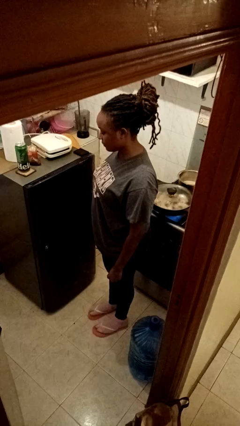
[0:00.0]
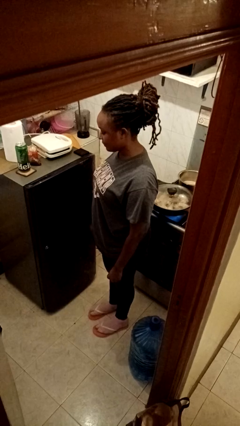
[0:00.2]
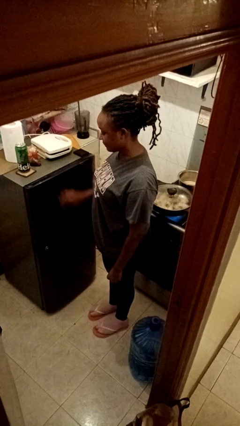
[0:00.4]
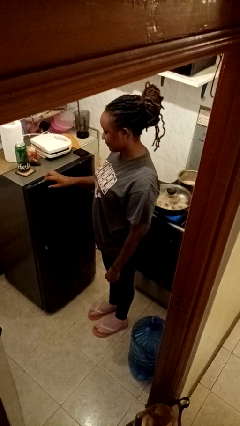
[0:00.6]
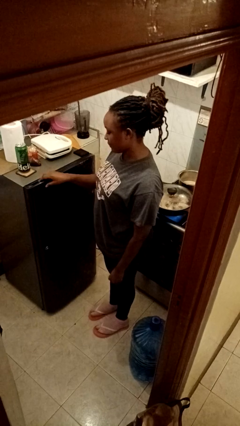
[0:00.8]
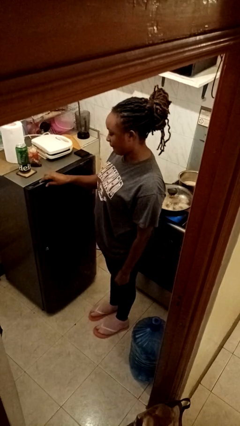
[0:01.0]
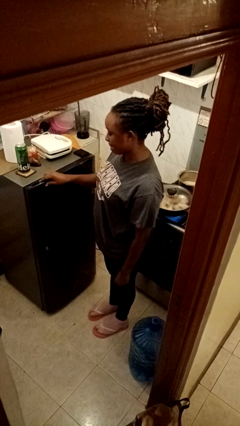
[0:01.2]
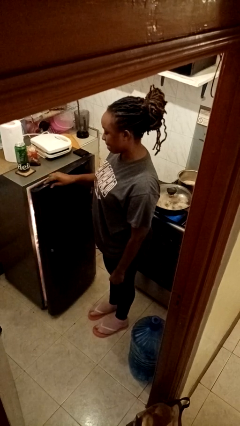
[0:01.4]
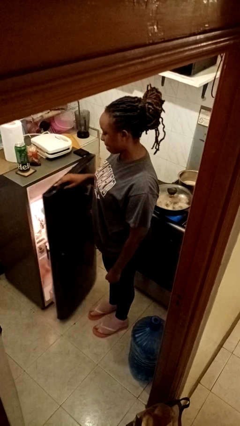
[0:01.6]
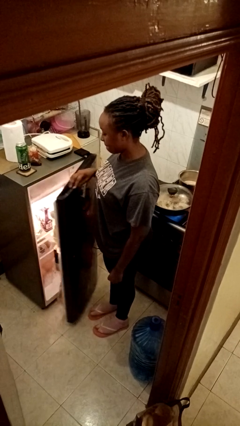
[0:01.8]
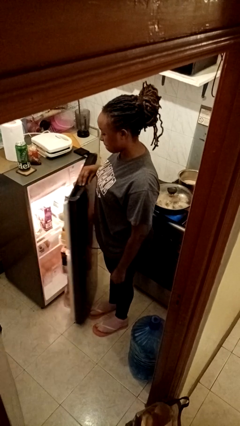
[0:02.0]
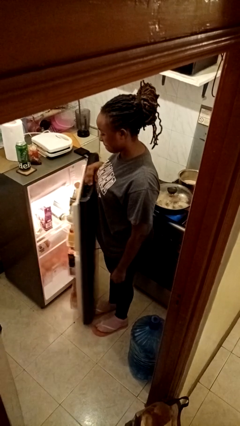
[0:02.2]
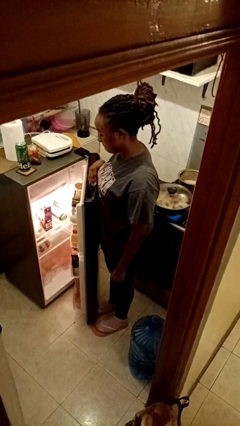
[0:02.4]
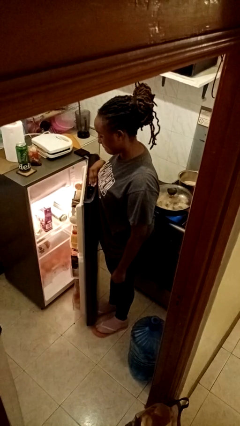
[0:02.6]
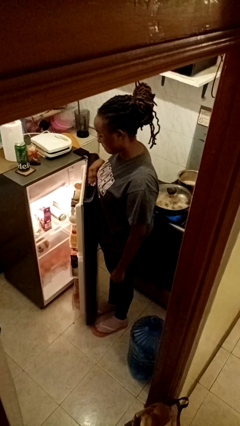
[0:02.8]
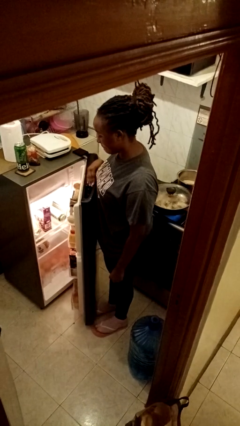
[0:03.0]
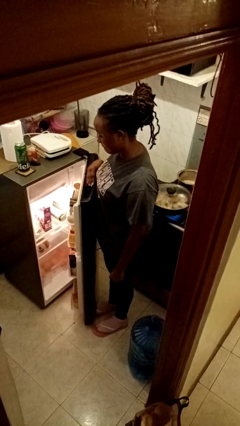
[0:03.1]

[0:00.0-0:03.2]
person opens refrigerator

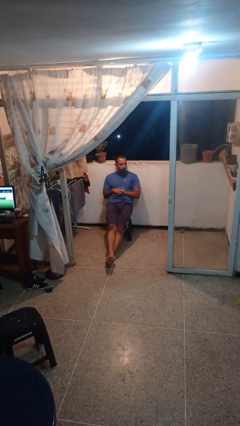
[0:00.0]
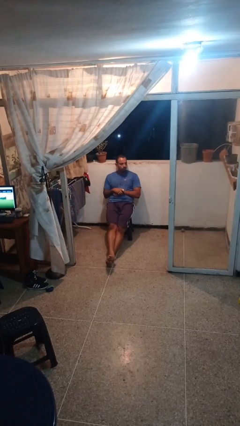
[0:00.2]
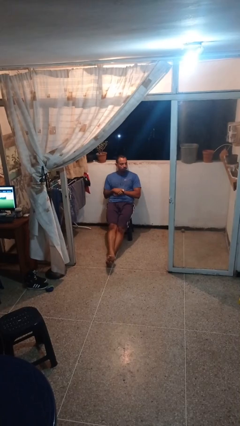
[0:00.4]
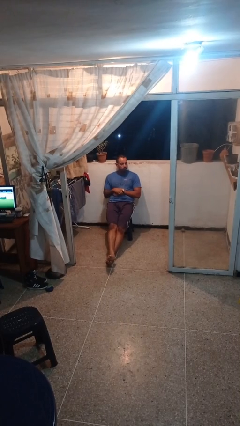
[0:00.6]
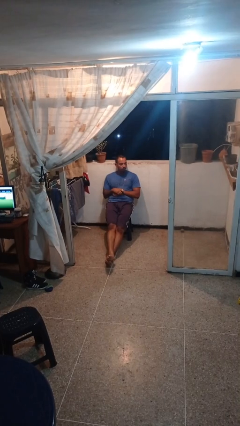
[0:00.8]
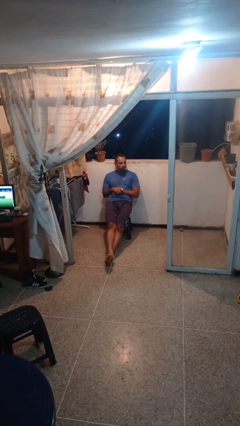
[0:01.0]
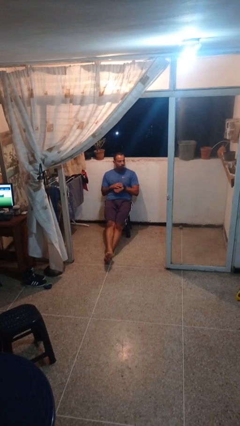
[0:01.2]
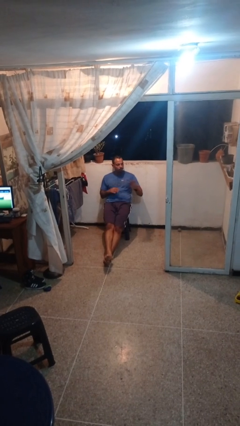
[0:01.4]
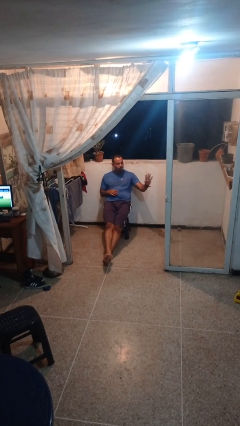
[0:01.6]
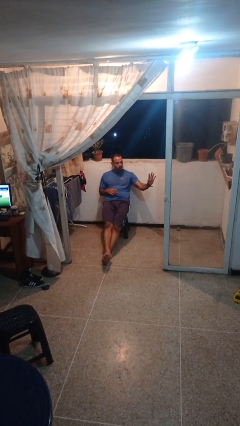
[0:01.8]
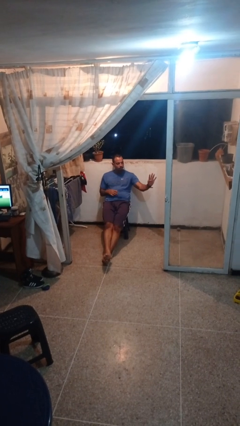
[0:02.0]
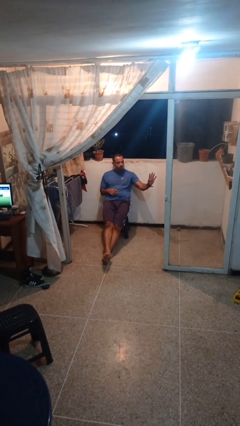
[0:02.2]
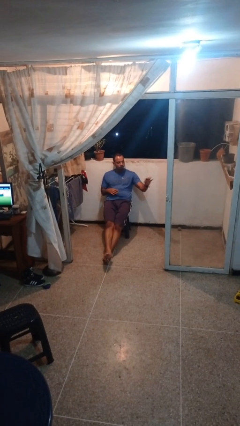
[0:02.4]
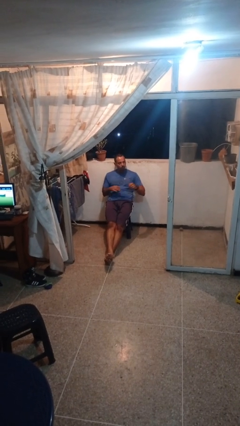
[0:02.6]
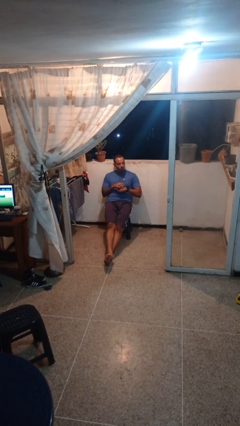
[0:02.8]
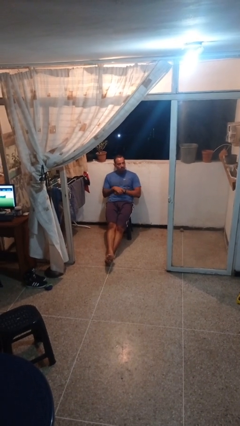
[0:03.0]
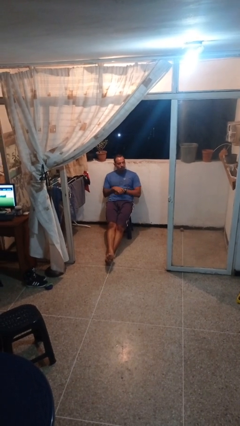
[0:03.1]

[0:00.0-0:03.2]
person gestures number four

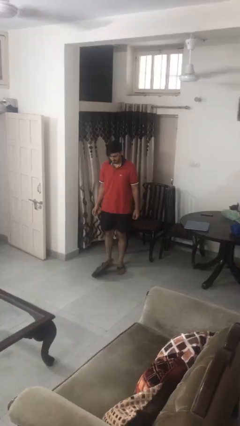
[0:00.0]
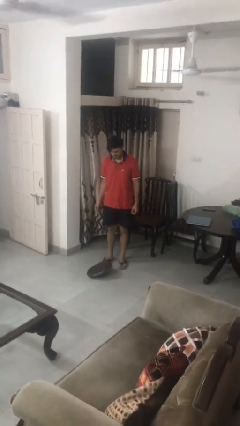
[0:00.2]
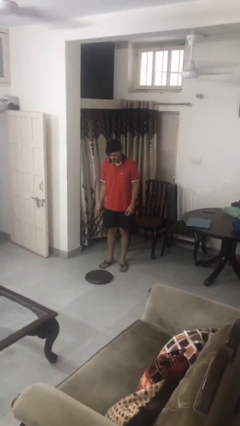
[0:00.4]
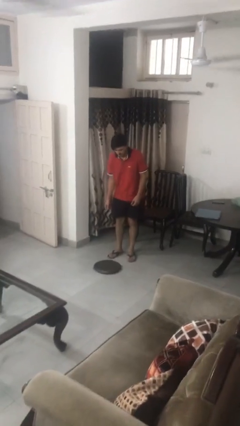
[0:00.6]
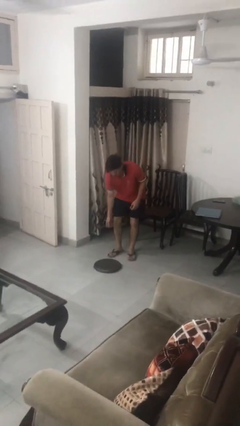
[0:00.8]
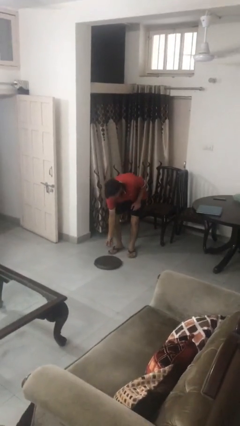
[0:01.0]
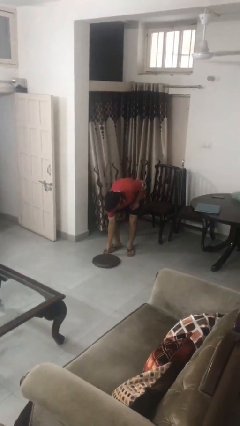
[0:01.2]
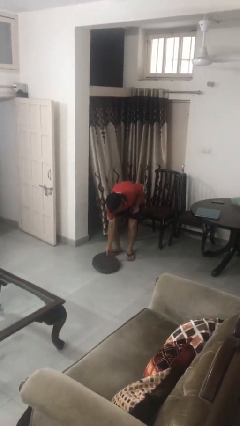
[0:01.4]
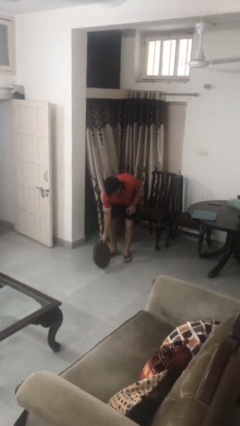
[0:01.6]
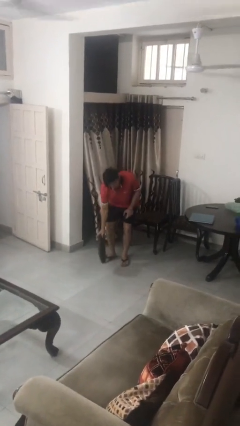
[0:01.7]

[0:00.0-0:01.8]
person picks up object from floor

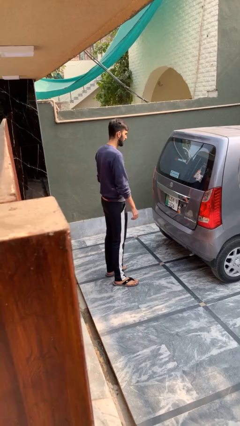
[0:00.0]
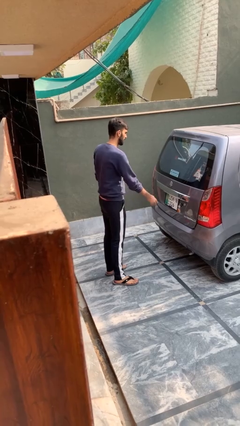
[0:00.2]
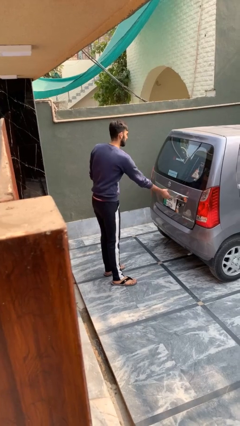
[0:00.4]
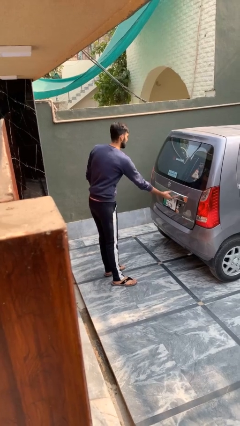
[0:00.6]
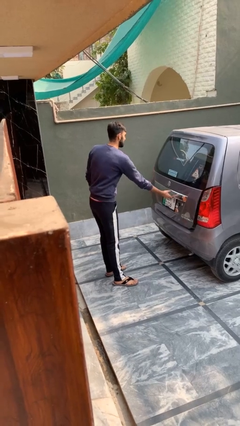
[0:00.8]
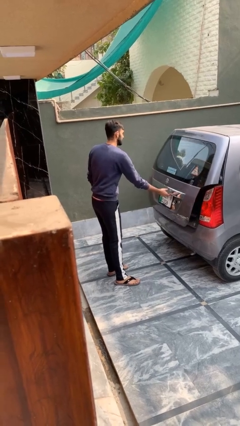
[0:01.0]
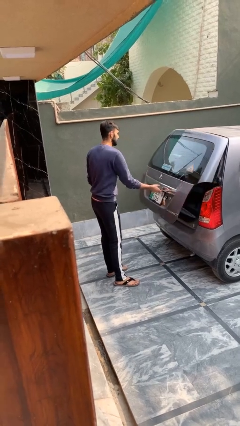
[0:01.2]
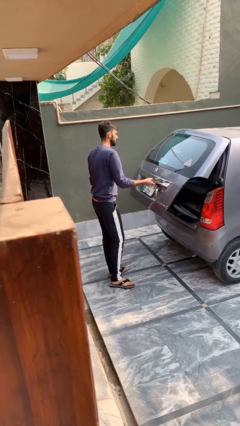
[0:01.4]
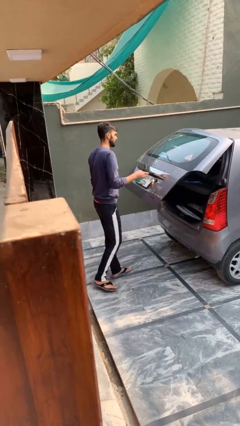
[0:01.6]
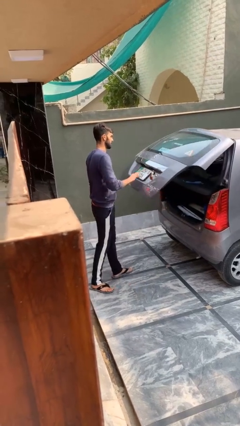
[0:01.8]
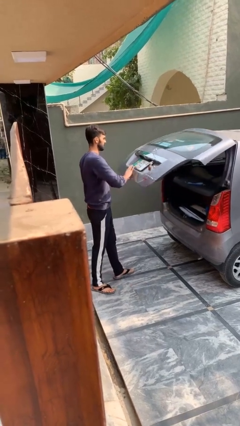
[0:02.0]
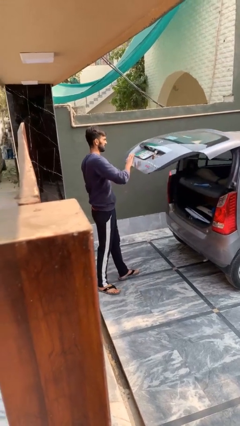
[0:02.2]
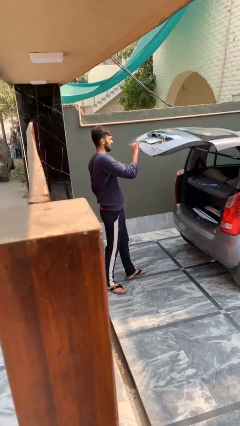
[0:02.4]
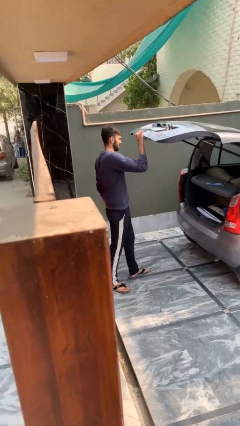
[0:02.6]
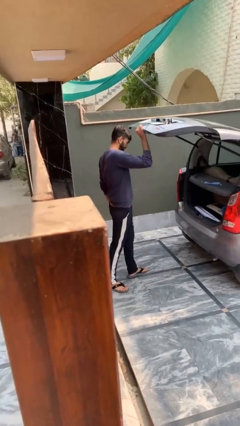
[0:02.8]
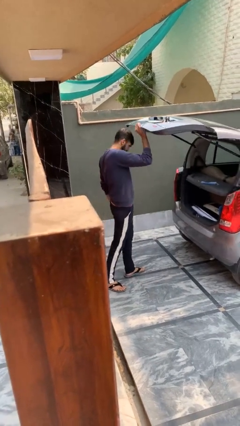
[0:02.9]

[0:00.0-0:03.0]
person opens car trunk

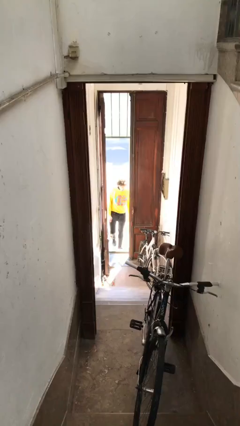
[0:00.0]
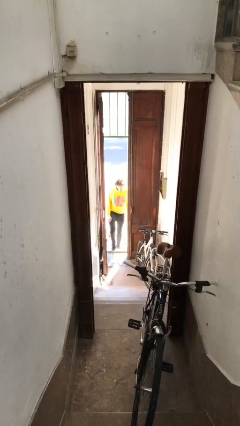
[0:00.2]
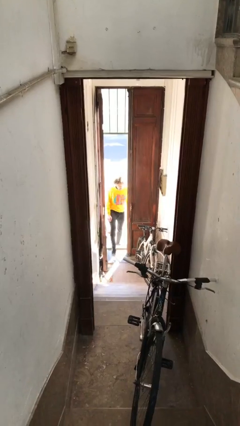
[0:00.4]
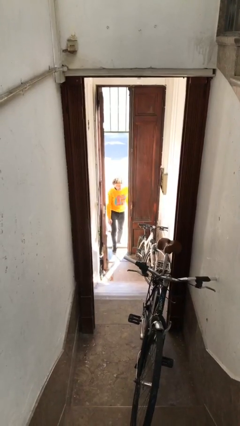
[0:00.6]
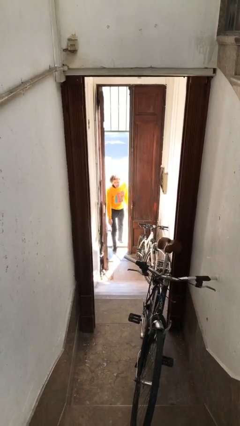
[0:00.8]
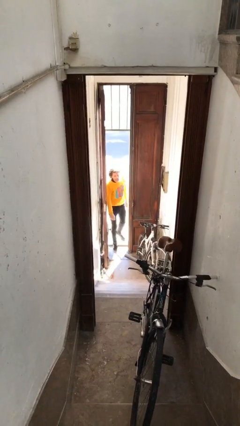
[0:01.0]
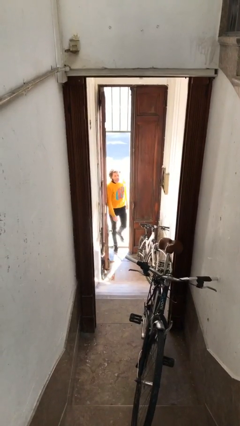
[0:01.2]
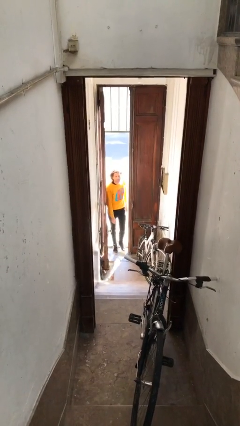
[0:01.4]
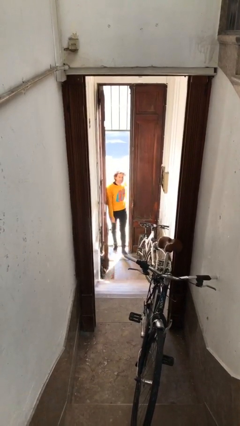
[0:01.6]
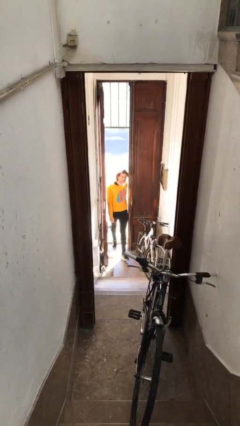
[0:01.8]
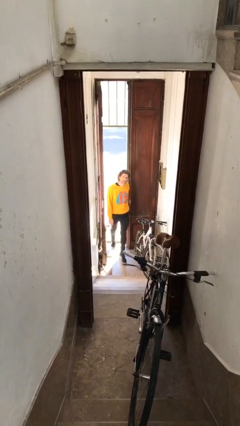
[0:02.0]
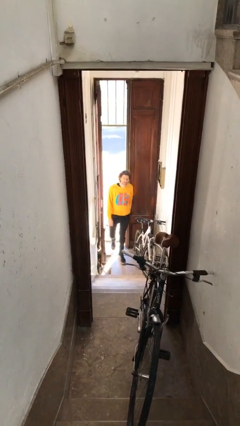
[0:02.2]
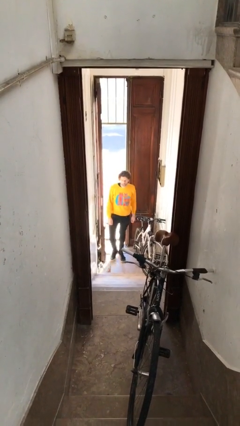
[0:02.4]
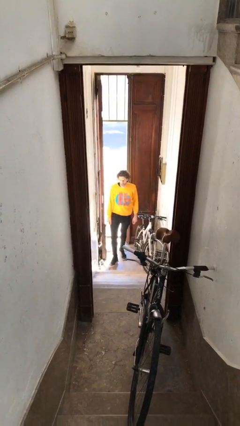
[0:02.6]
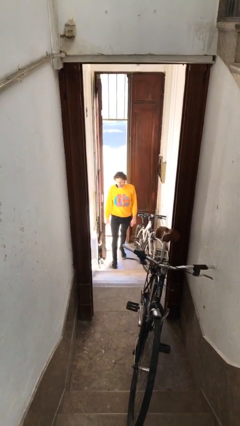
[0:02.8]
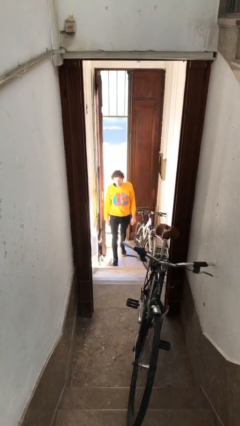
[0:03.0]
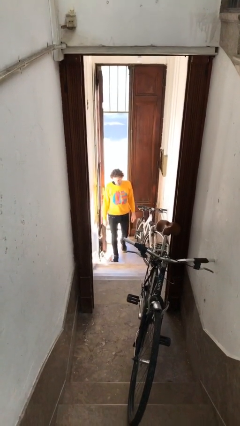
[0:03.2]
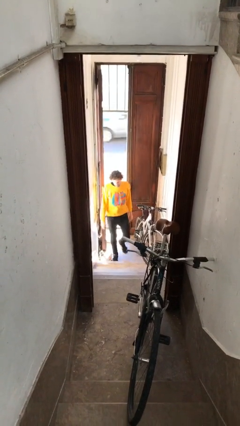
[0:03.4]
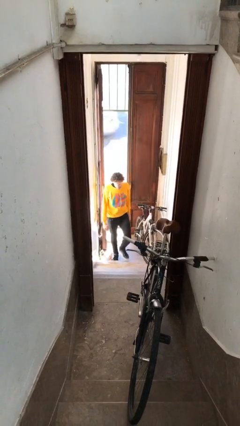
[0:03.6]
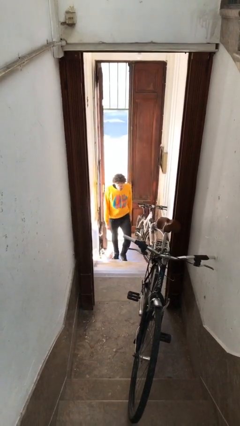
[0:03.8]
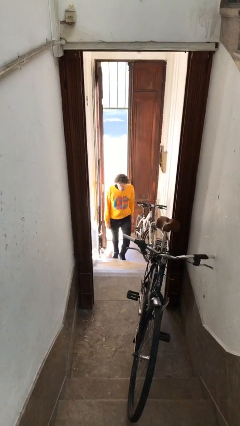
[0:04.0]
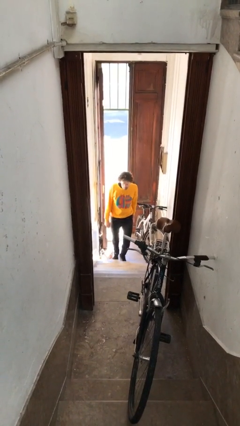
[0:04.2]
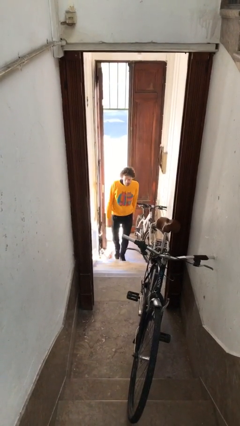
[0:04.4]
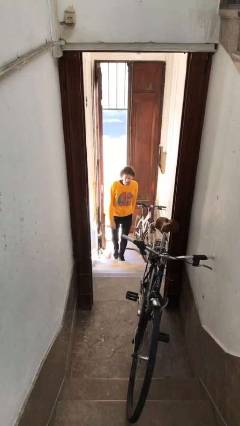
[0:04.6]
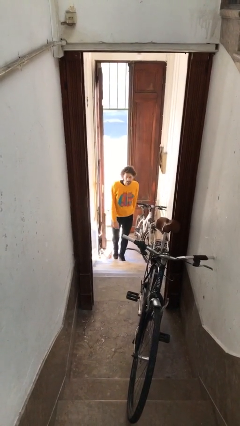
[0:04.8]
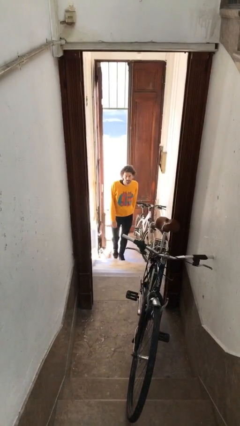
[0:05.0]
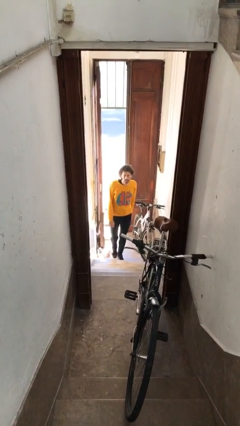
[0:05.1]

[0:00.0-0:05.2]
person enters scene through structure

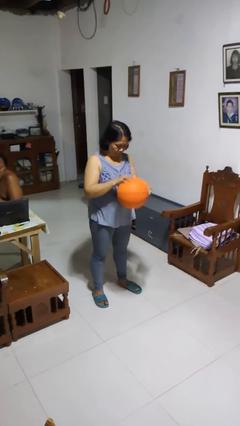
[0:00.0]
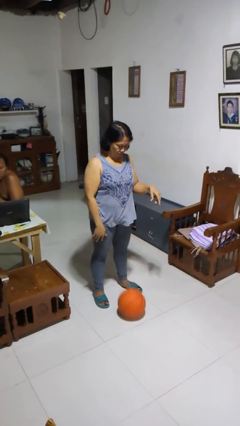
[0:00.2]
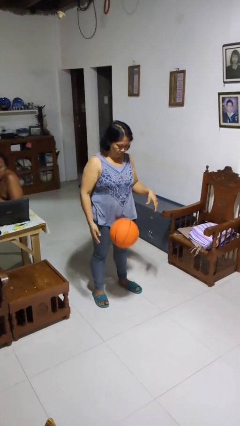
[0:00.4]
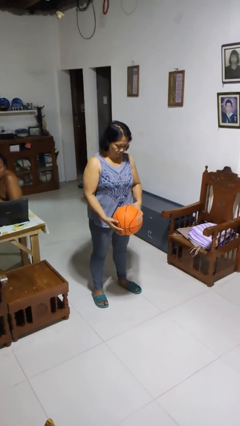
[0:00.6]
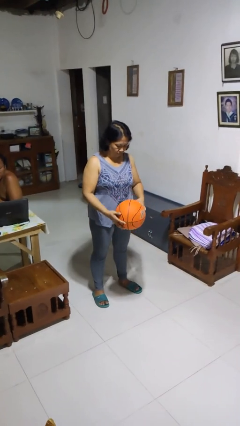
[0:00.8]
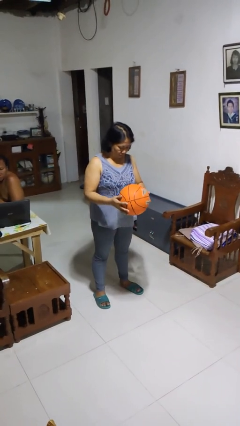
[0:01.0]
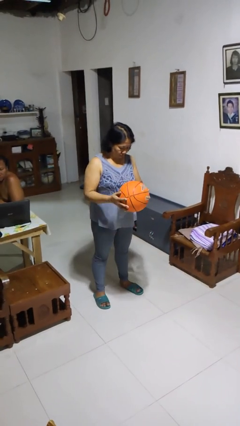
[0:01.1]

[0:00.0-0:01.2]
person bounces ball on floor

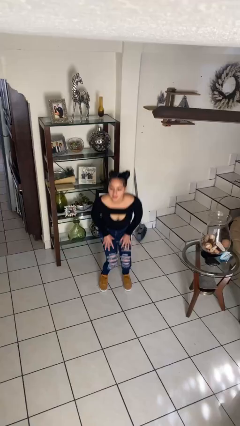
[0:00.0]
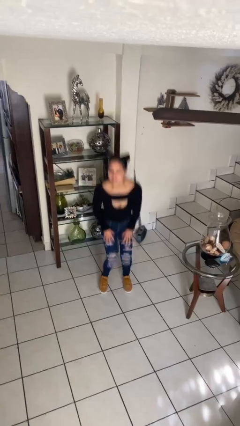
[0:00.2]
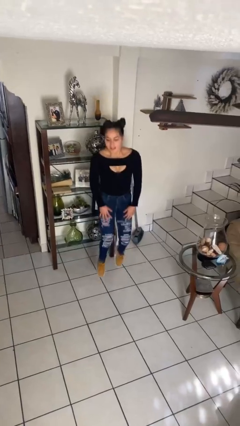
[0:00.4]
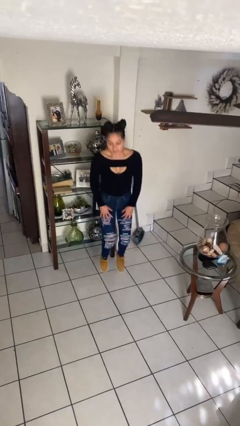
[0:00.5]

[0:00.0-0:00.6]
person jumps
